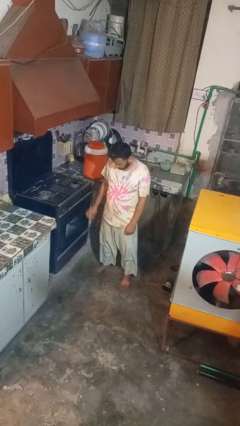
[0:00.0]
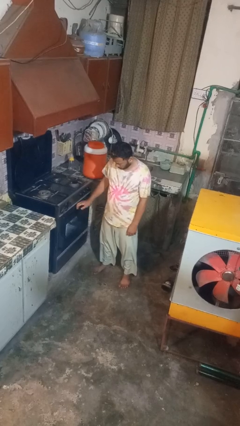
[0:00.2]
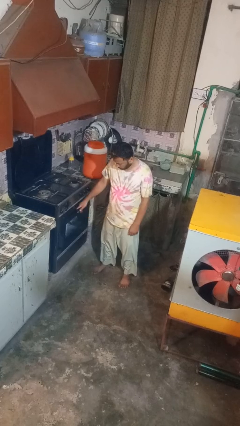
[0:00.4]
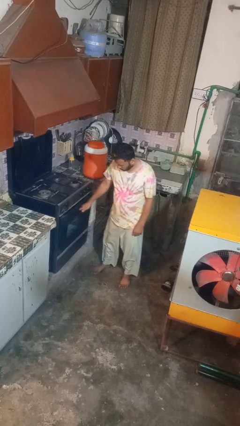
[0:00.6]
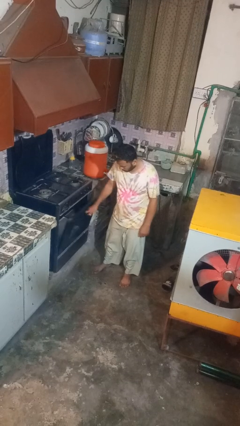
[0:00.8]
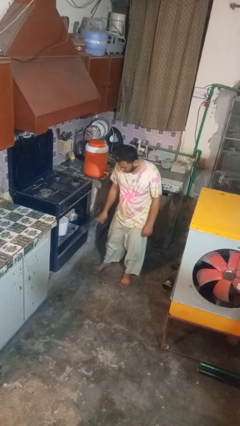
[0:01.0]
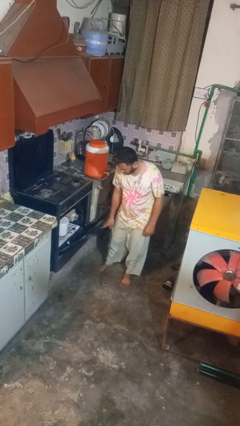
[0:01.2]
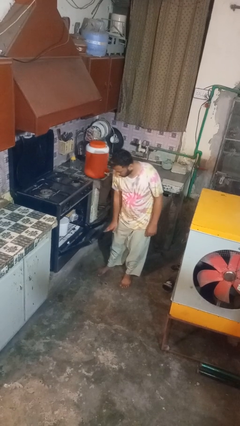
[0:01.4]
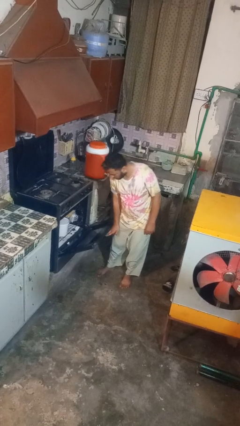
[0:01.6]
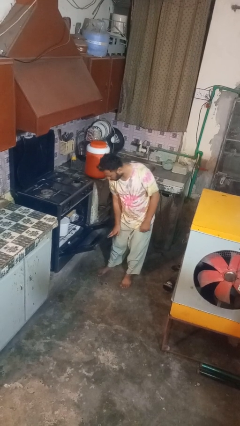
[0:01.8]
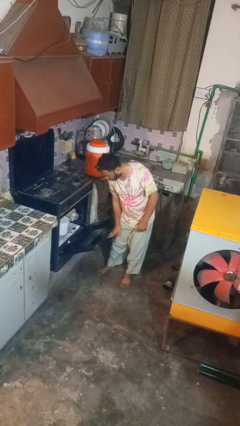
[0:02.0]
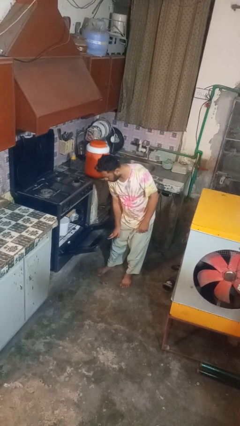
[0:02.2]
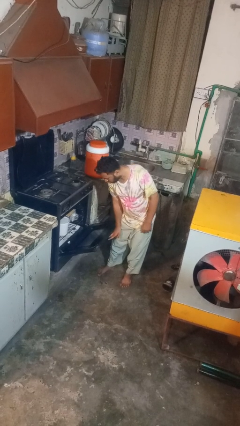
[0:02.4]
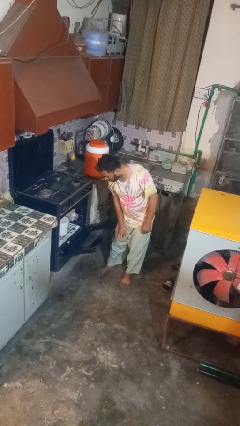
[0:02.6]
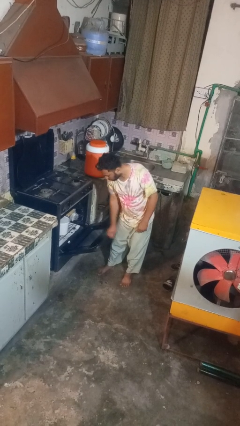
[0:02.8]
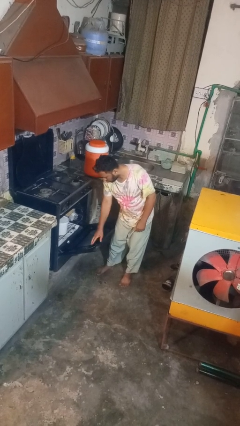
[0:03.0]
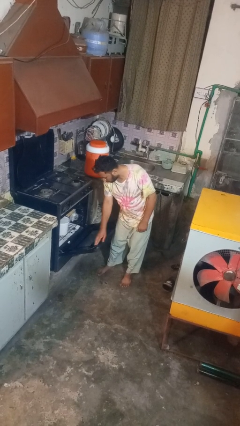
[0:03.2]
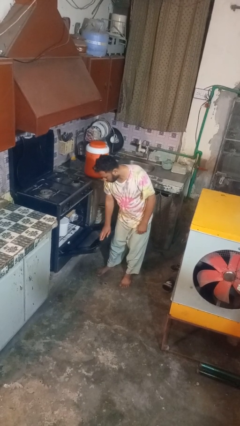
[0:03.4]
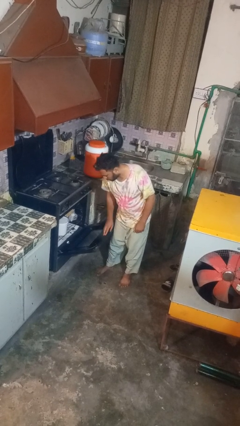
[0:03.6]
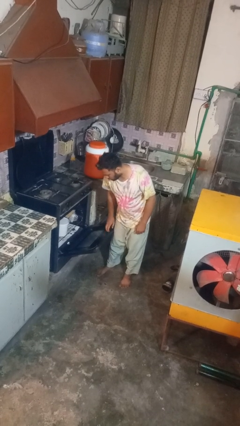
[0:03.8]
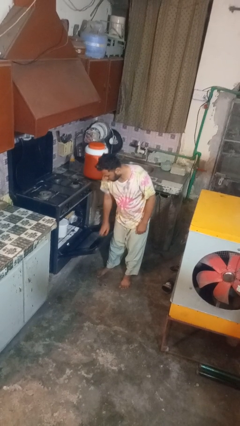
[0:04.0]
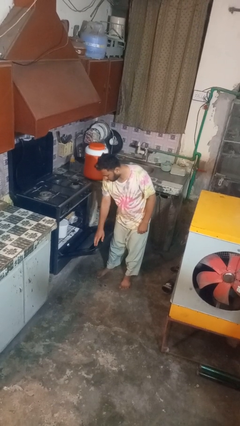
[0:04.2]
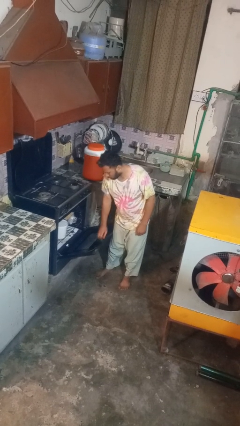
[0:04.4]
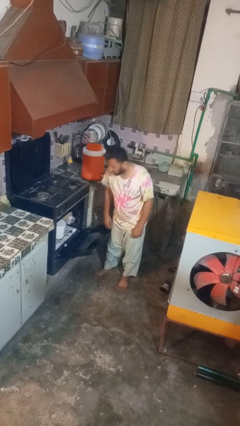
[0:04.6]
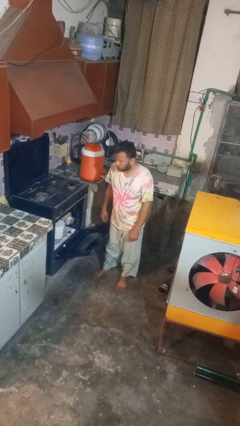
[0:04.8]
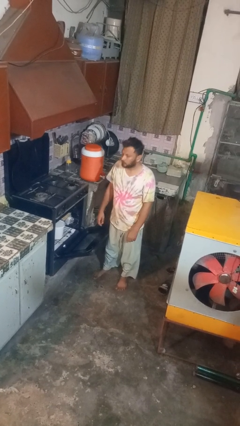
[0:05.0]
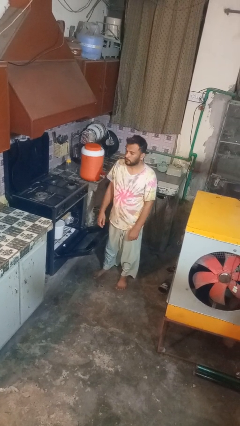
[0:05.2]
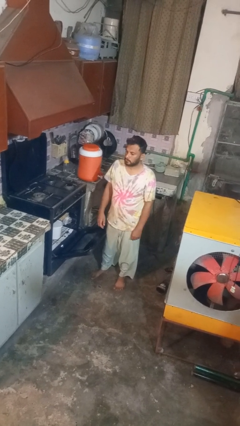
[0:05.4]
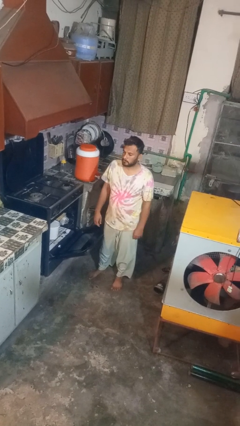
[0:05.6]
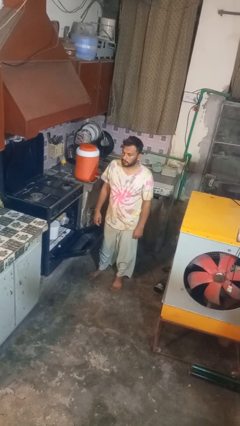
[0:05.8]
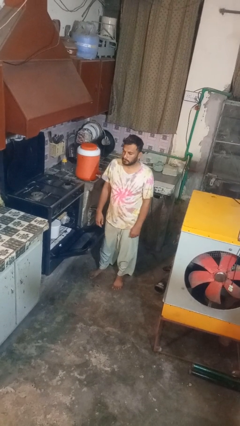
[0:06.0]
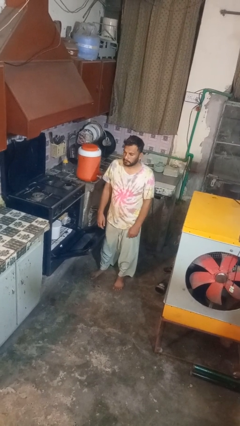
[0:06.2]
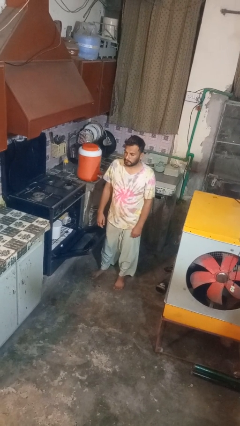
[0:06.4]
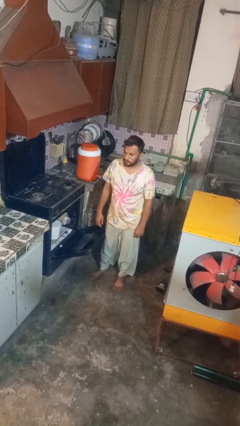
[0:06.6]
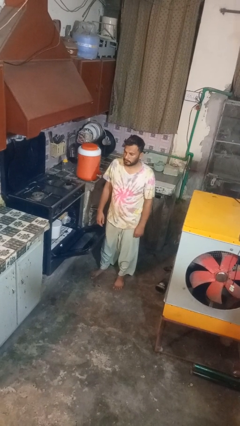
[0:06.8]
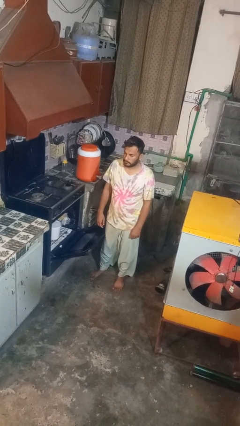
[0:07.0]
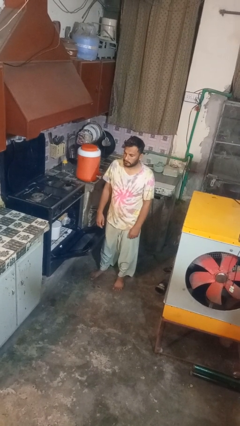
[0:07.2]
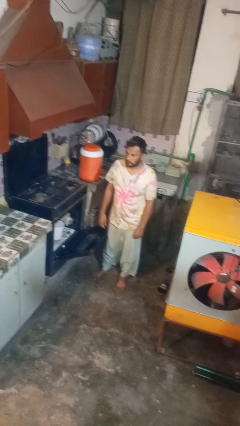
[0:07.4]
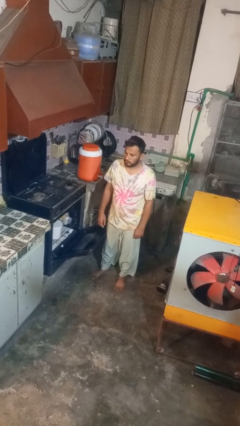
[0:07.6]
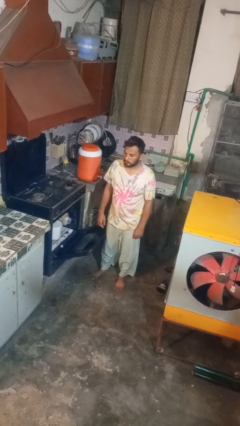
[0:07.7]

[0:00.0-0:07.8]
person opens oven door

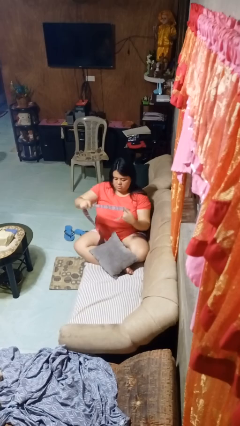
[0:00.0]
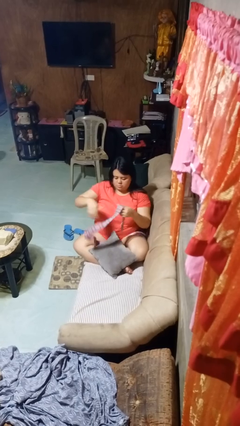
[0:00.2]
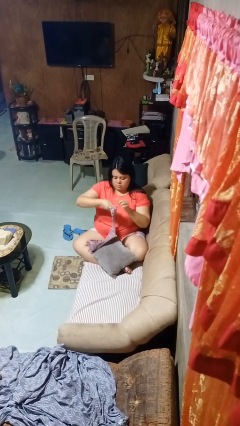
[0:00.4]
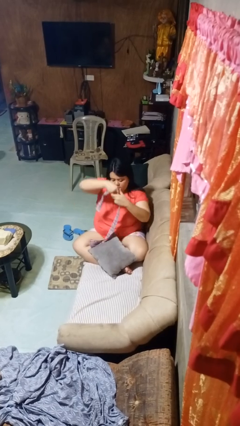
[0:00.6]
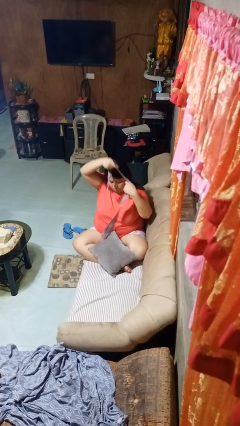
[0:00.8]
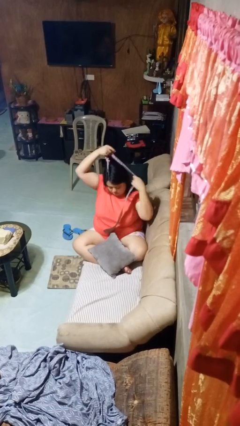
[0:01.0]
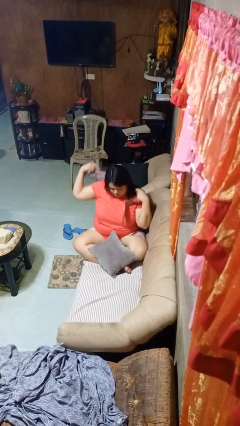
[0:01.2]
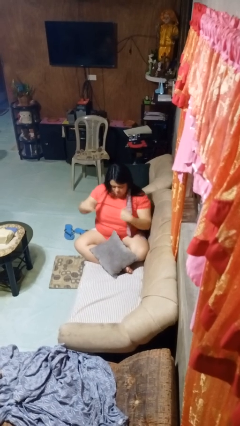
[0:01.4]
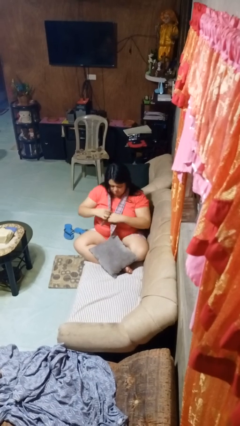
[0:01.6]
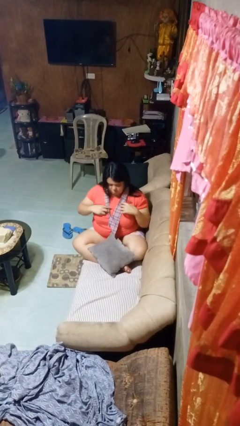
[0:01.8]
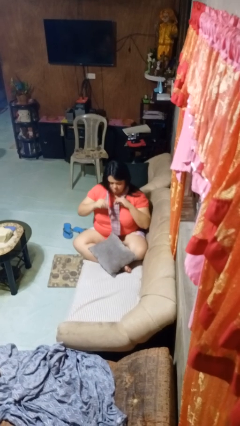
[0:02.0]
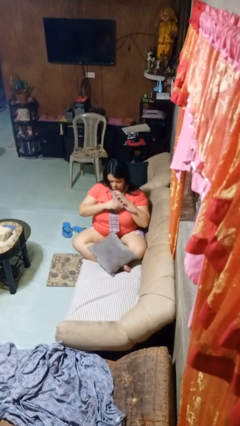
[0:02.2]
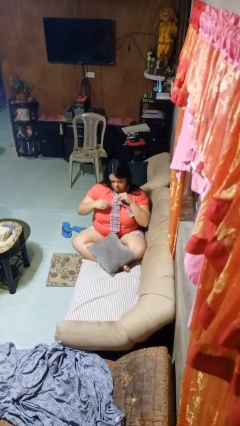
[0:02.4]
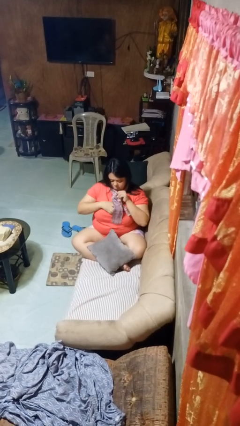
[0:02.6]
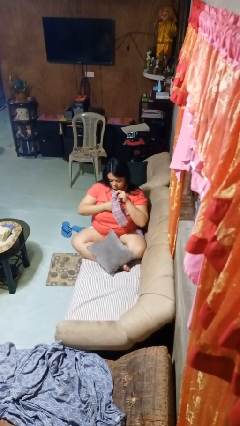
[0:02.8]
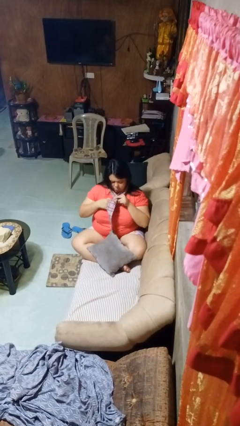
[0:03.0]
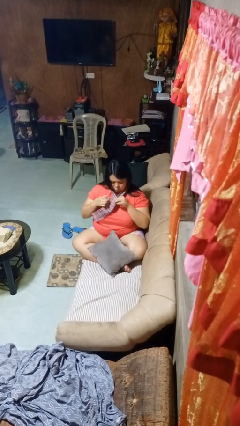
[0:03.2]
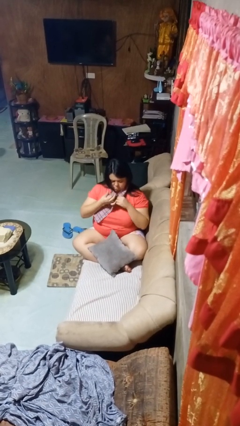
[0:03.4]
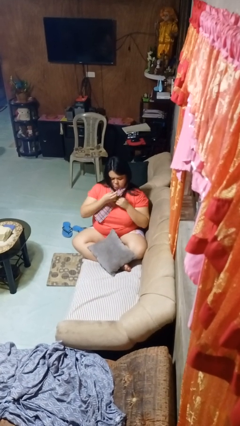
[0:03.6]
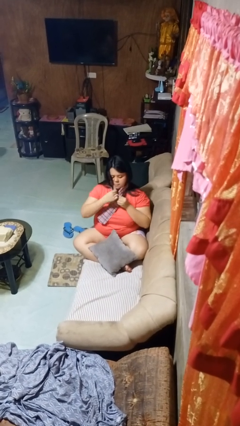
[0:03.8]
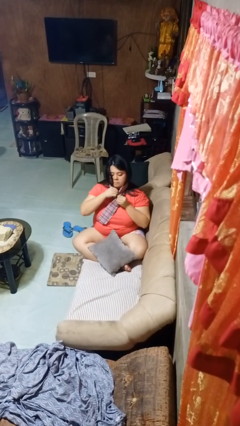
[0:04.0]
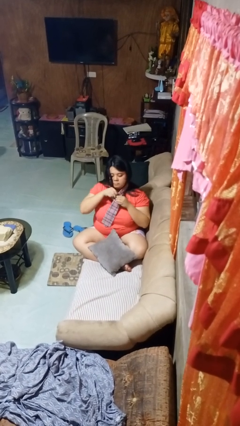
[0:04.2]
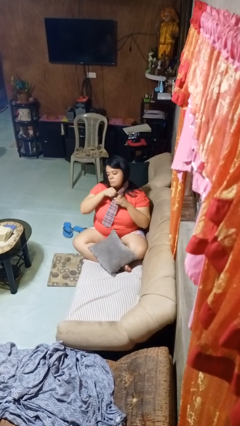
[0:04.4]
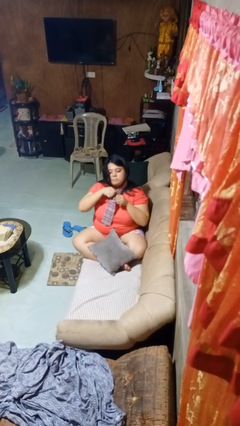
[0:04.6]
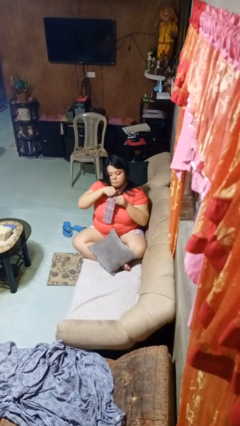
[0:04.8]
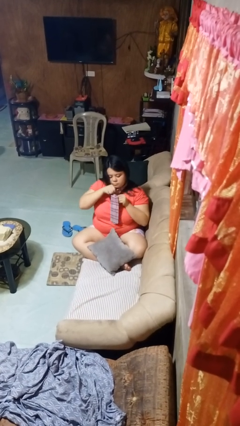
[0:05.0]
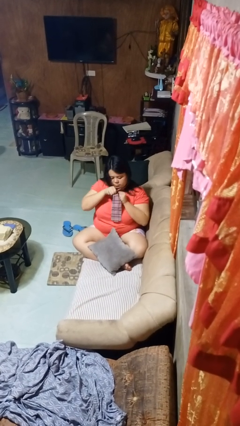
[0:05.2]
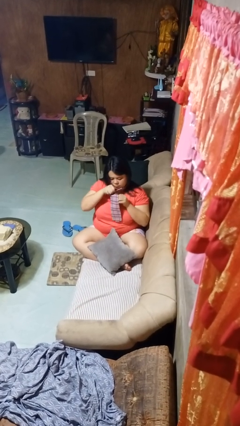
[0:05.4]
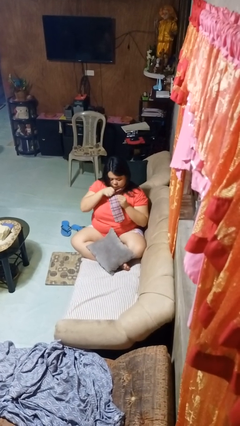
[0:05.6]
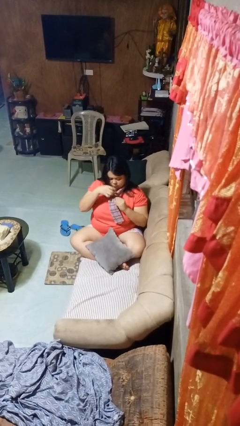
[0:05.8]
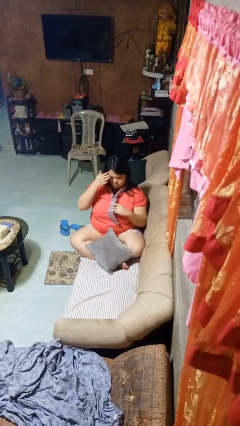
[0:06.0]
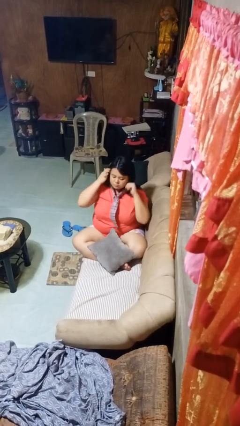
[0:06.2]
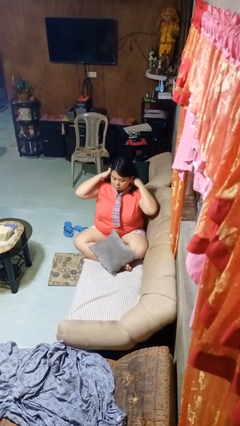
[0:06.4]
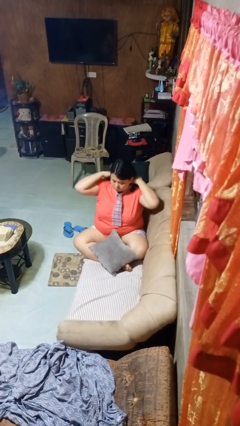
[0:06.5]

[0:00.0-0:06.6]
person puts on necktie

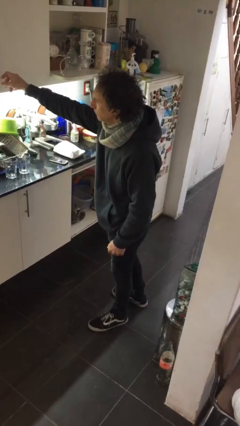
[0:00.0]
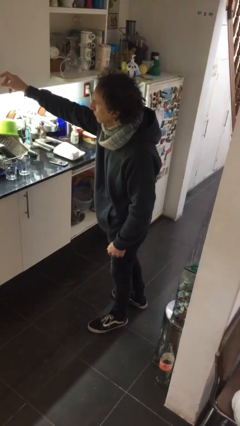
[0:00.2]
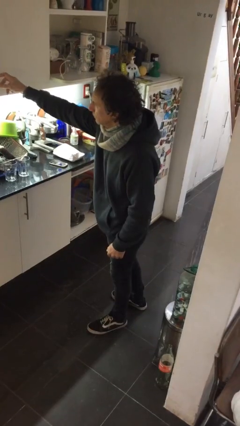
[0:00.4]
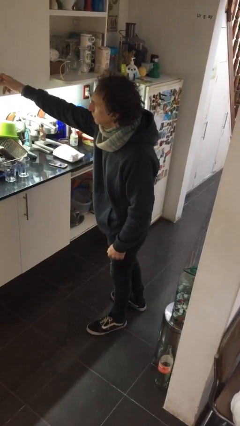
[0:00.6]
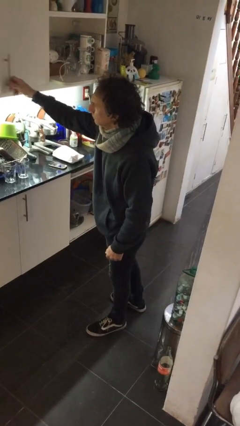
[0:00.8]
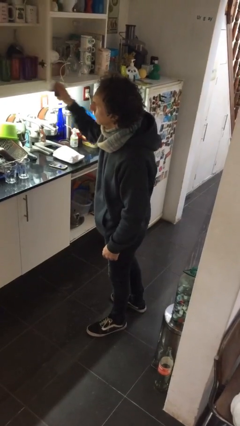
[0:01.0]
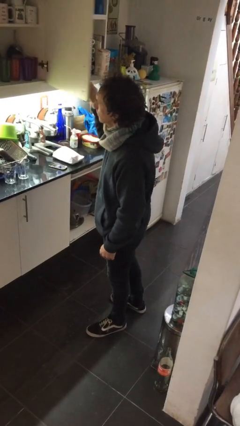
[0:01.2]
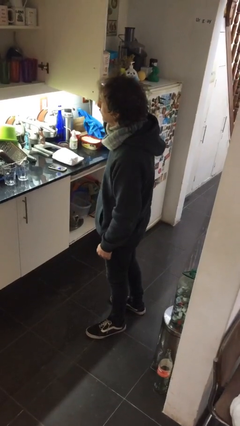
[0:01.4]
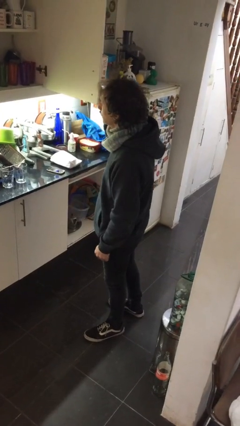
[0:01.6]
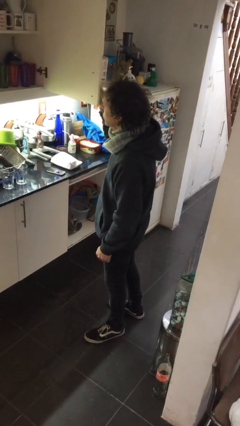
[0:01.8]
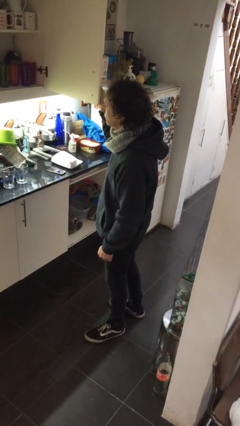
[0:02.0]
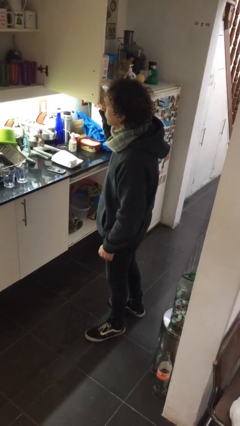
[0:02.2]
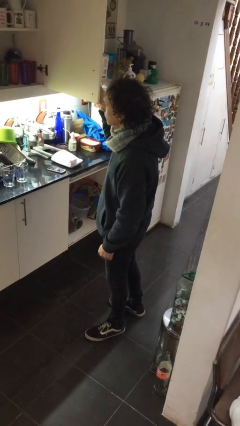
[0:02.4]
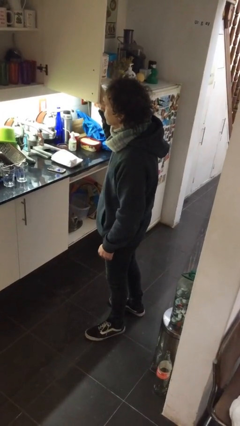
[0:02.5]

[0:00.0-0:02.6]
person closes cabinet

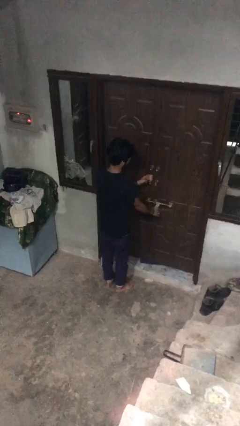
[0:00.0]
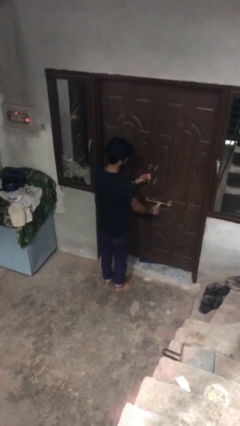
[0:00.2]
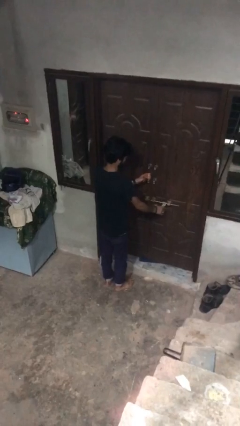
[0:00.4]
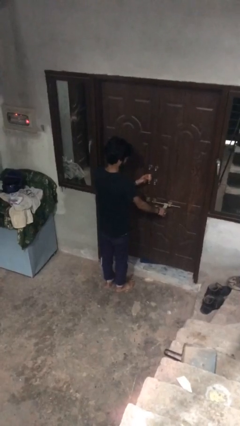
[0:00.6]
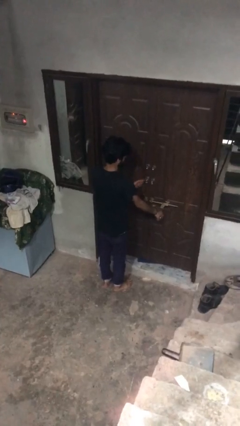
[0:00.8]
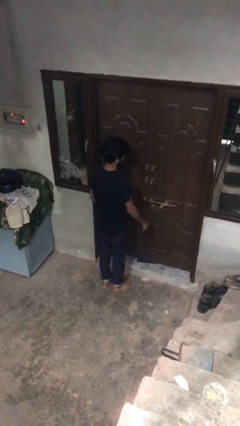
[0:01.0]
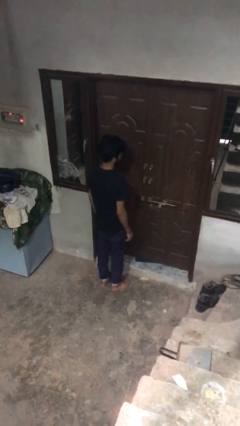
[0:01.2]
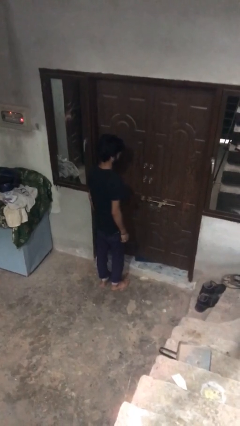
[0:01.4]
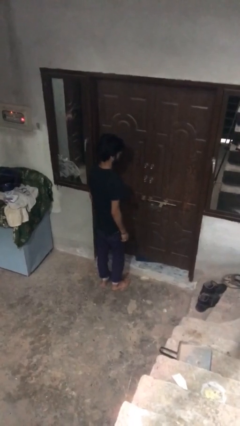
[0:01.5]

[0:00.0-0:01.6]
person unlocks door with keys
